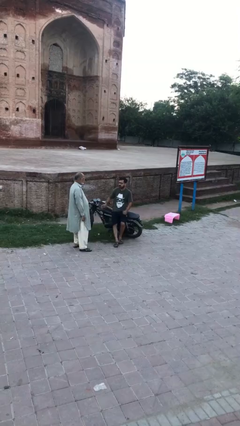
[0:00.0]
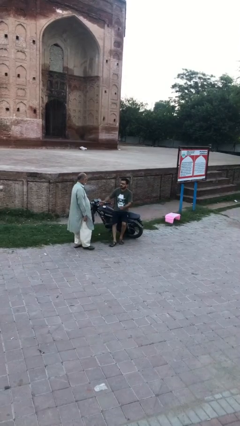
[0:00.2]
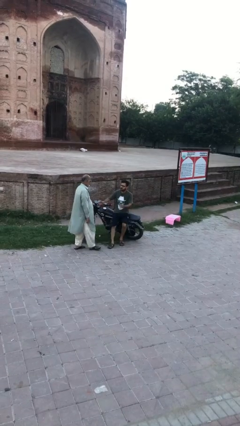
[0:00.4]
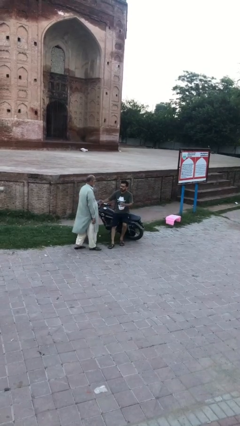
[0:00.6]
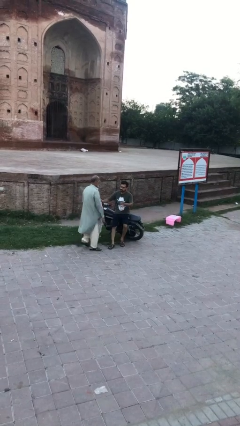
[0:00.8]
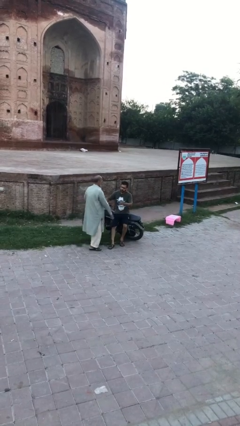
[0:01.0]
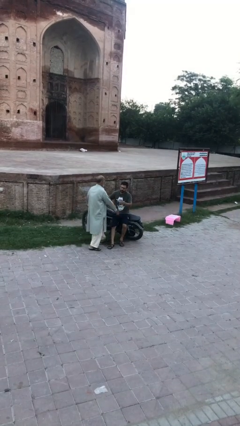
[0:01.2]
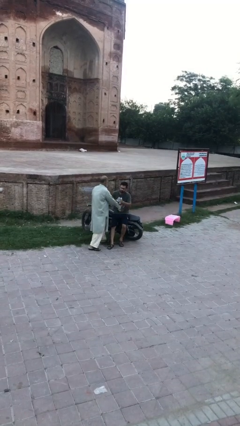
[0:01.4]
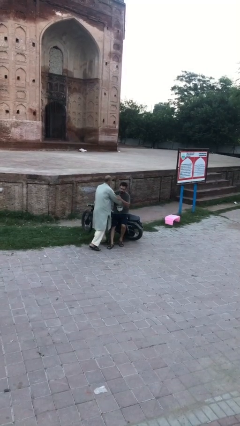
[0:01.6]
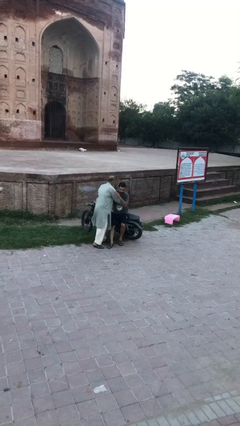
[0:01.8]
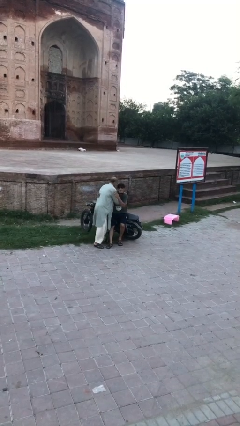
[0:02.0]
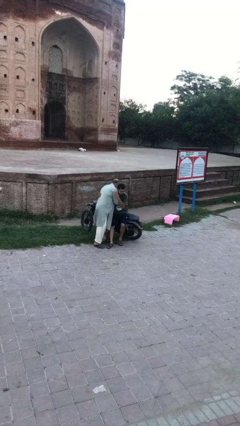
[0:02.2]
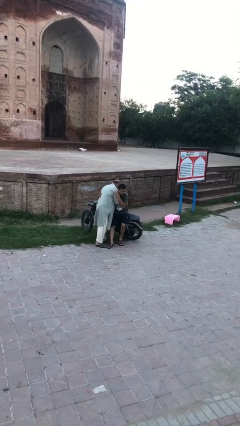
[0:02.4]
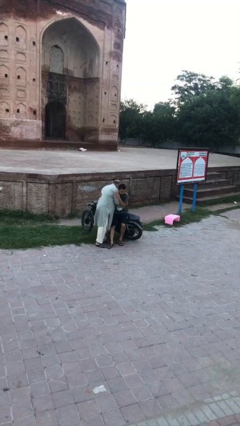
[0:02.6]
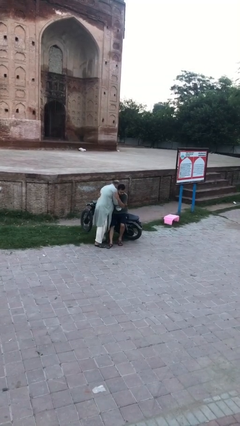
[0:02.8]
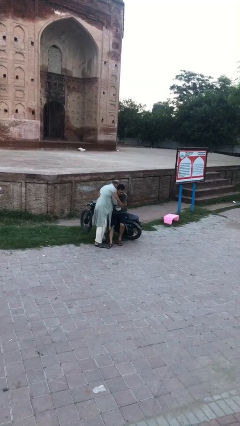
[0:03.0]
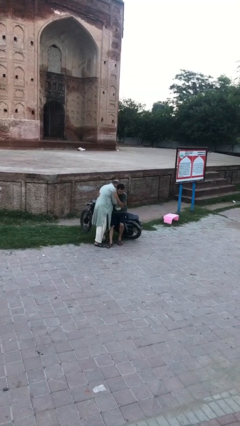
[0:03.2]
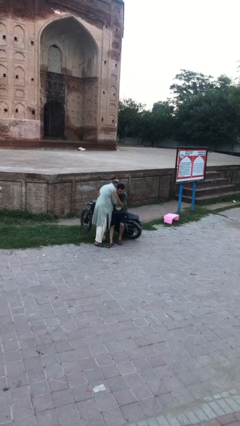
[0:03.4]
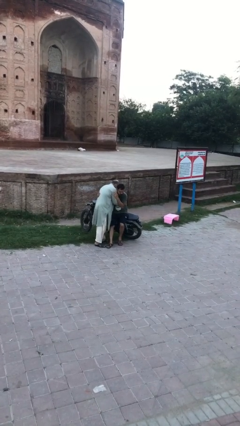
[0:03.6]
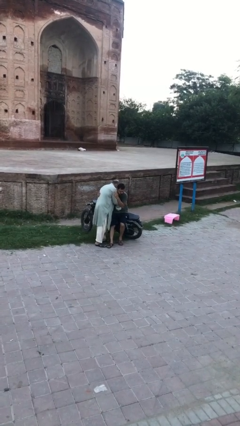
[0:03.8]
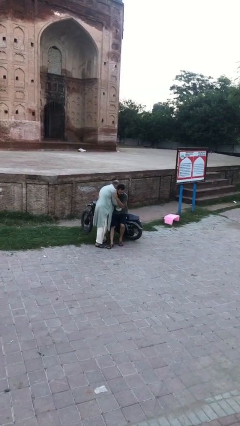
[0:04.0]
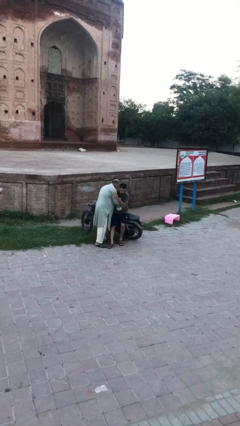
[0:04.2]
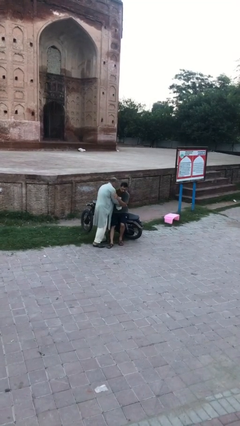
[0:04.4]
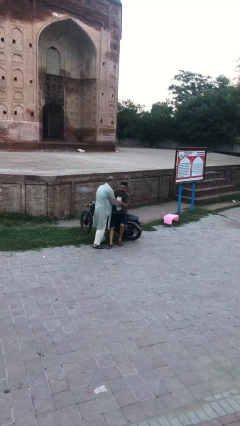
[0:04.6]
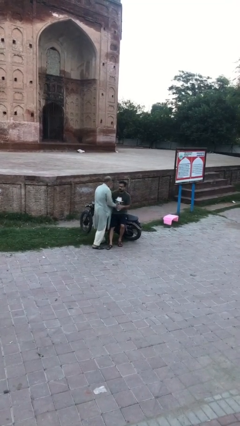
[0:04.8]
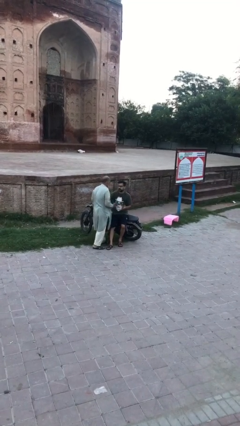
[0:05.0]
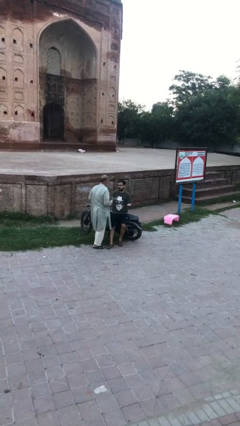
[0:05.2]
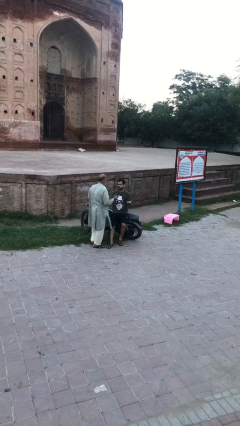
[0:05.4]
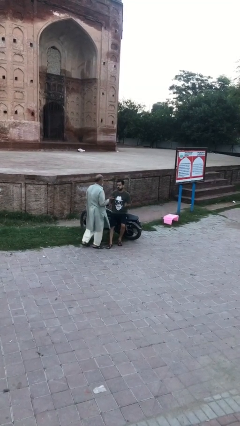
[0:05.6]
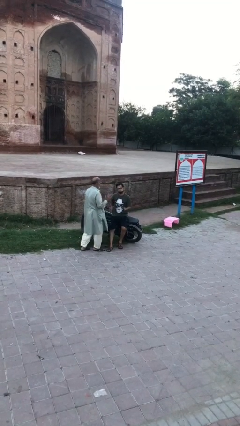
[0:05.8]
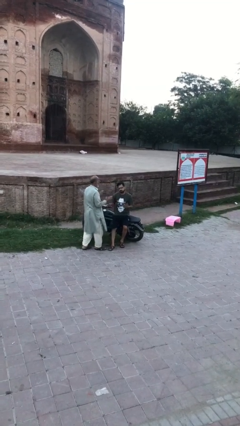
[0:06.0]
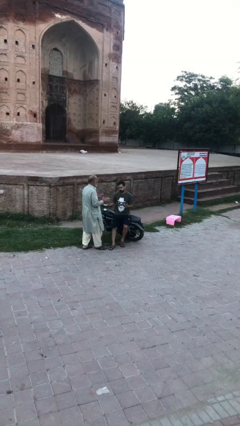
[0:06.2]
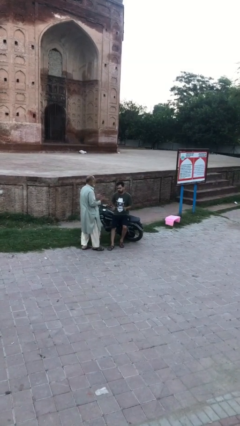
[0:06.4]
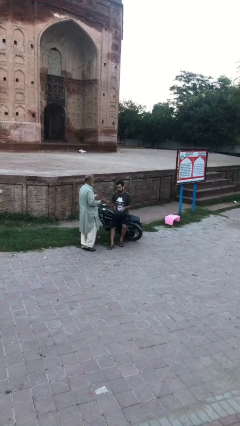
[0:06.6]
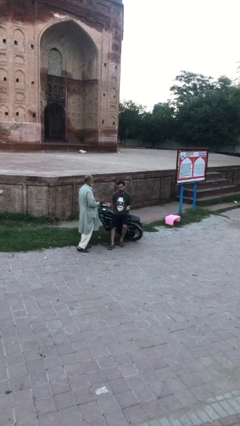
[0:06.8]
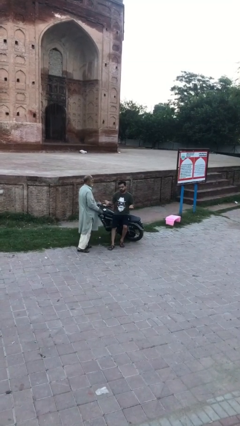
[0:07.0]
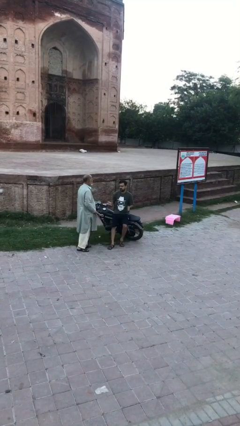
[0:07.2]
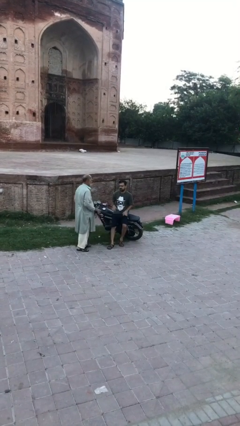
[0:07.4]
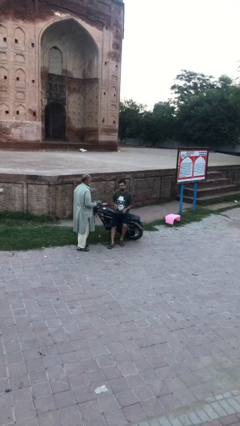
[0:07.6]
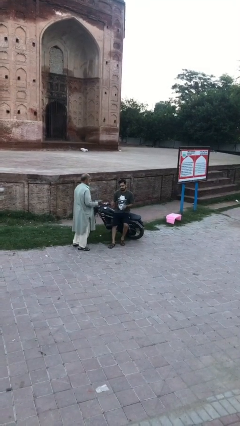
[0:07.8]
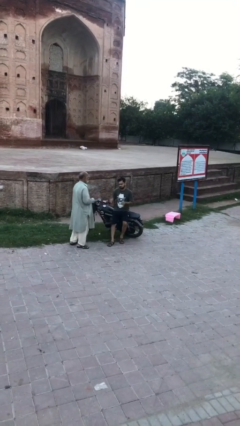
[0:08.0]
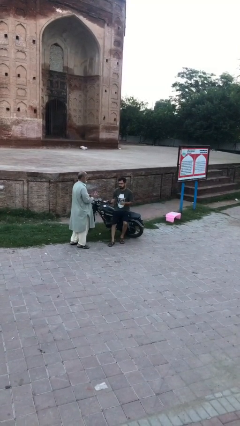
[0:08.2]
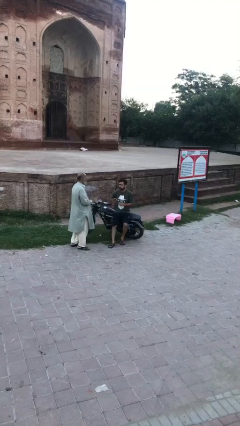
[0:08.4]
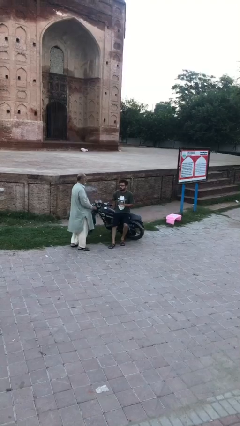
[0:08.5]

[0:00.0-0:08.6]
person embraces person

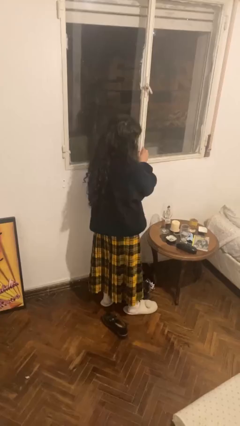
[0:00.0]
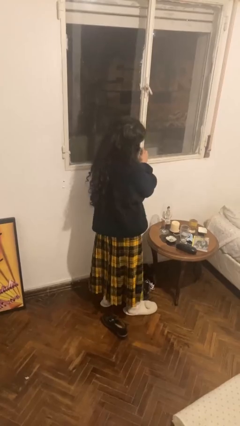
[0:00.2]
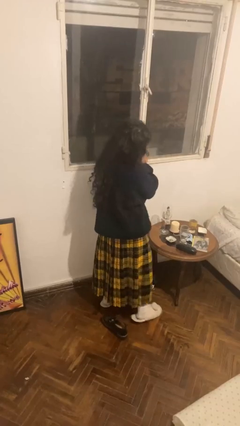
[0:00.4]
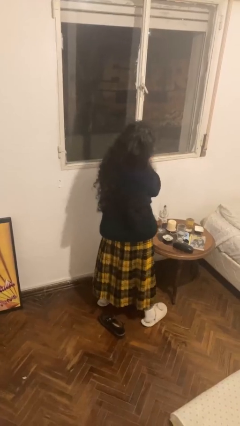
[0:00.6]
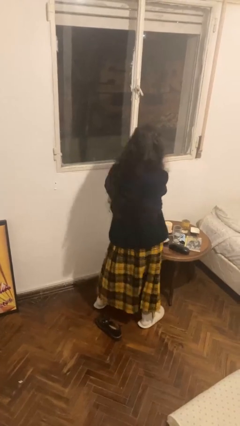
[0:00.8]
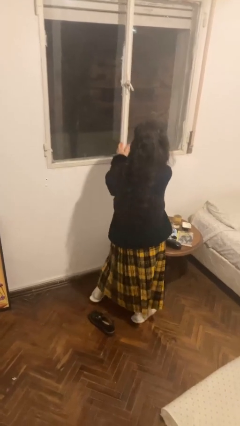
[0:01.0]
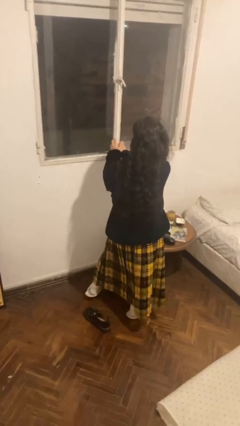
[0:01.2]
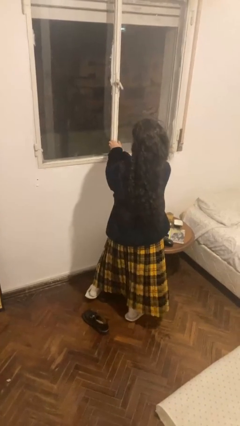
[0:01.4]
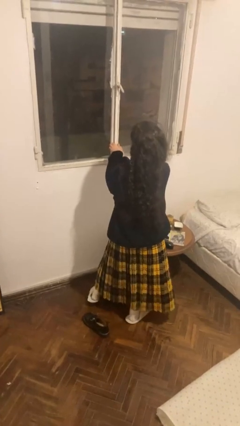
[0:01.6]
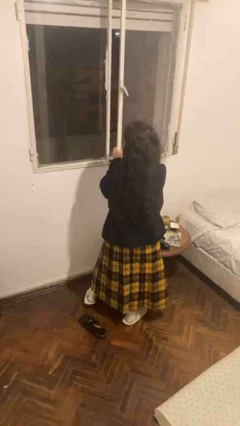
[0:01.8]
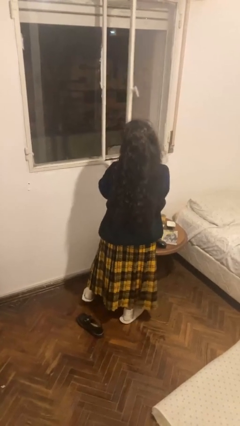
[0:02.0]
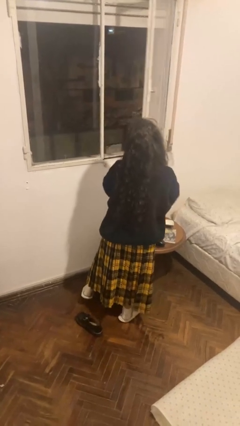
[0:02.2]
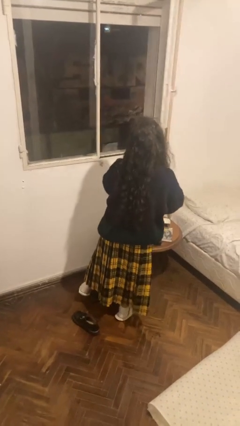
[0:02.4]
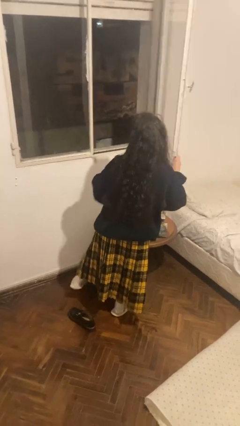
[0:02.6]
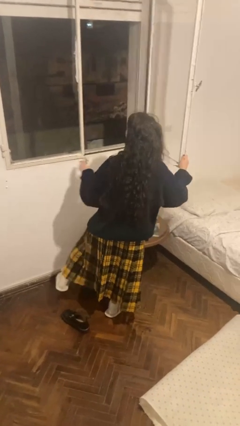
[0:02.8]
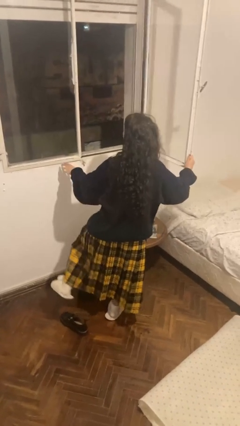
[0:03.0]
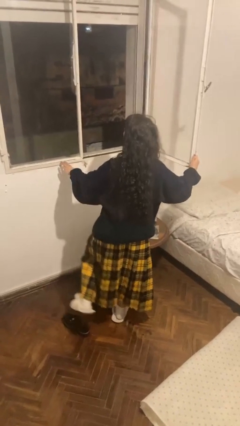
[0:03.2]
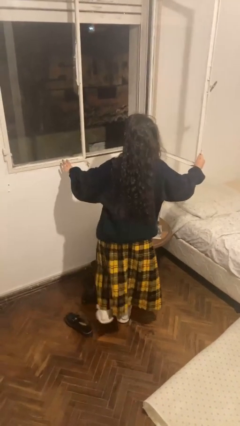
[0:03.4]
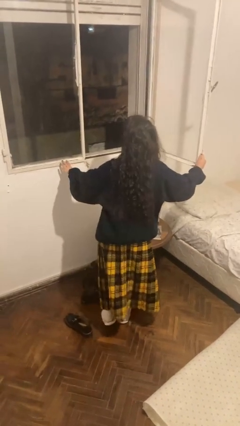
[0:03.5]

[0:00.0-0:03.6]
person opens home window

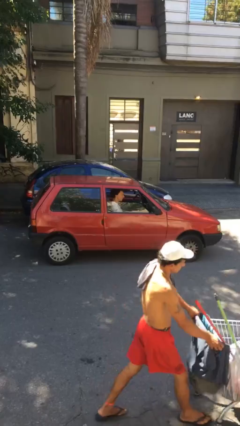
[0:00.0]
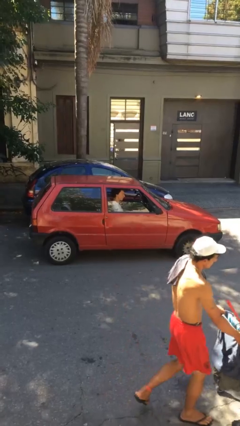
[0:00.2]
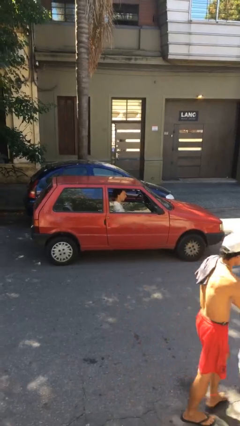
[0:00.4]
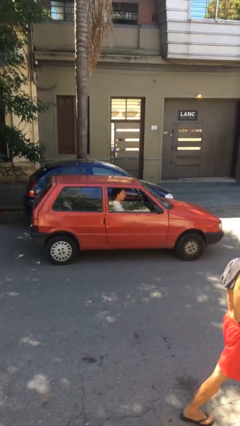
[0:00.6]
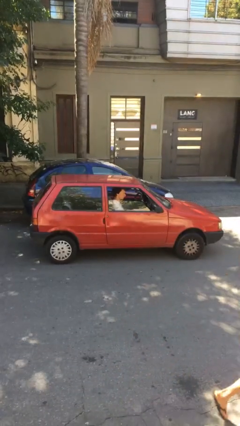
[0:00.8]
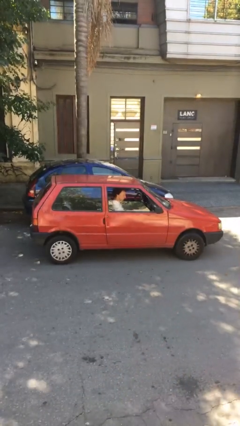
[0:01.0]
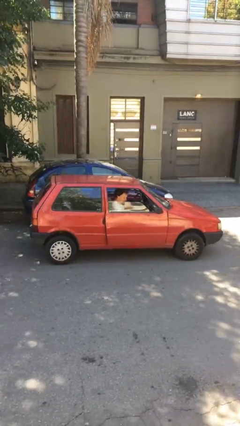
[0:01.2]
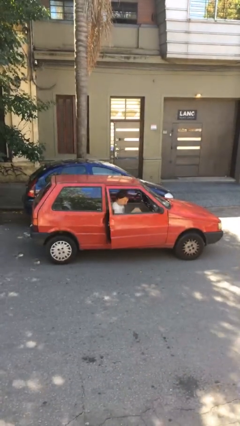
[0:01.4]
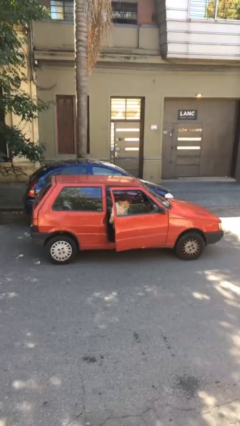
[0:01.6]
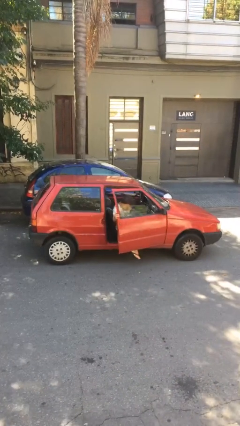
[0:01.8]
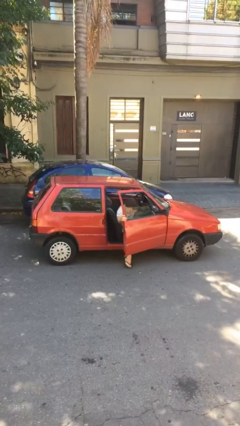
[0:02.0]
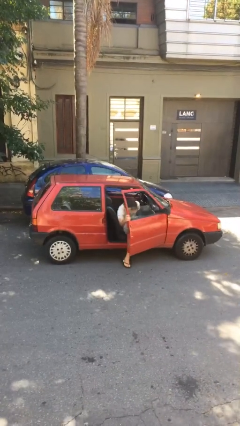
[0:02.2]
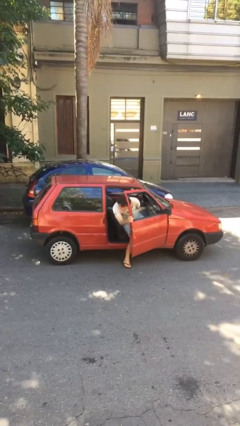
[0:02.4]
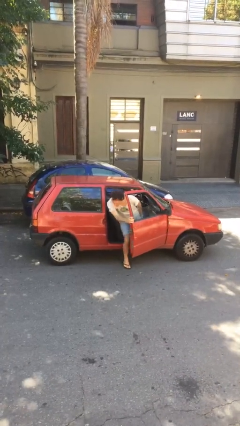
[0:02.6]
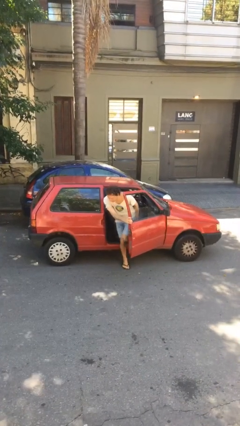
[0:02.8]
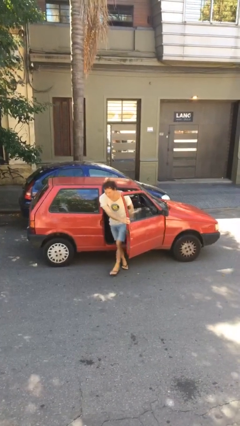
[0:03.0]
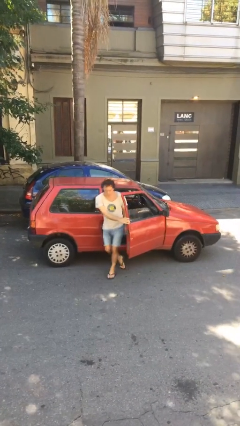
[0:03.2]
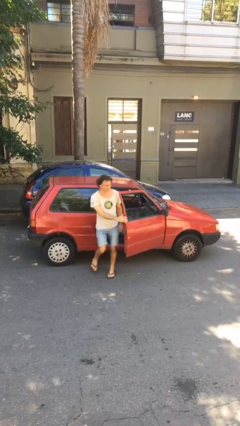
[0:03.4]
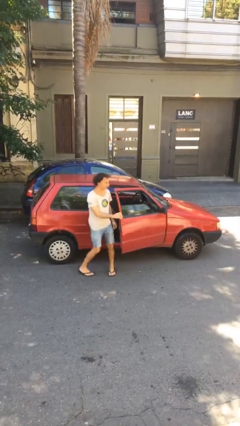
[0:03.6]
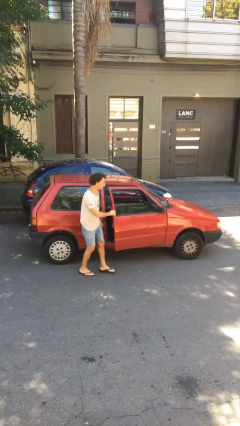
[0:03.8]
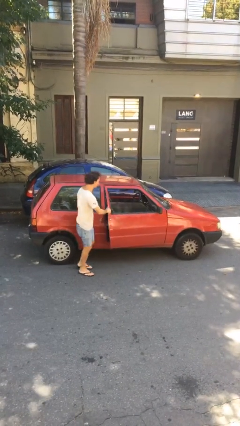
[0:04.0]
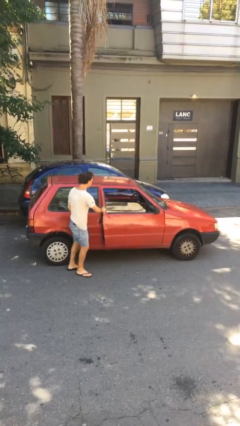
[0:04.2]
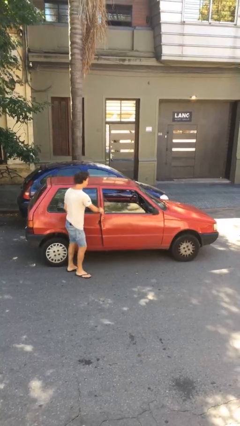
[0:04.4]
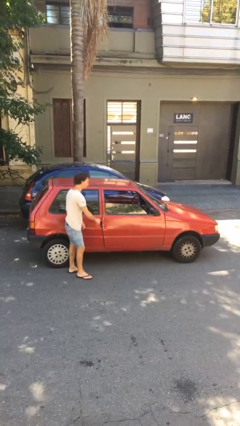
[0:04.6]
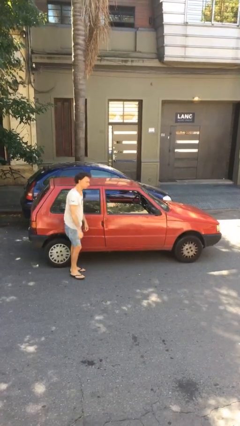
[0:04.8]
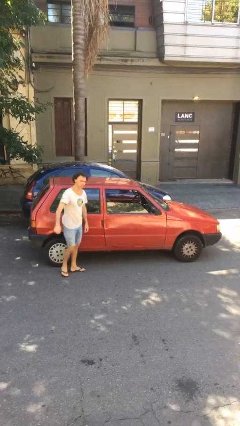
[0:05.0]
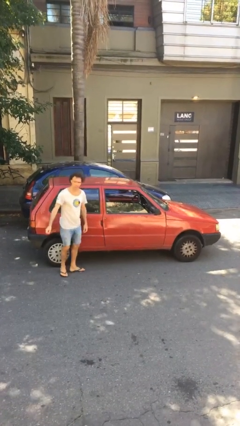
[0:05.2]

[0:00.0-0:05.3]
car drops off person

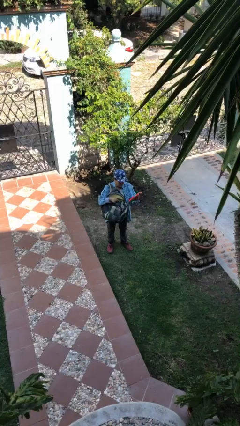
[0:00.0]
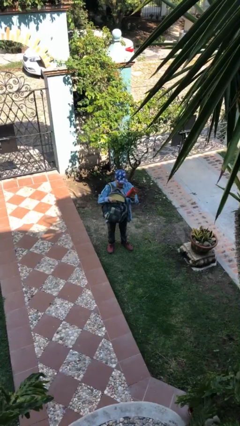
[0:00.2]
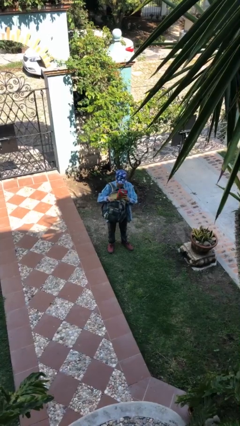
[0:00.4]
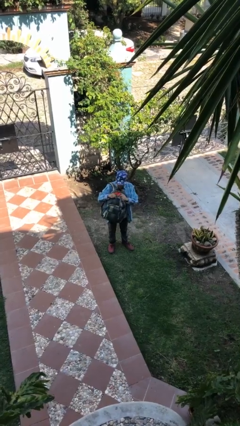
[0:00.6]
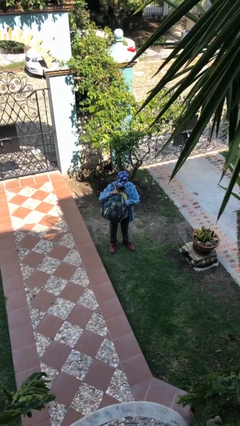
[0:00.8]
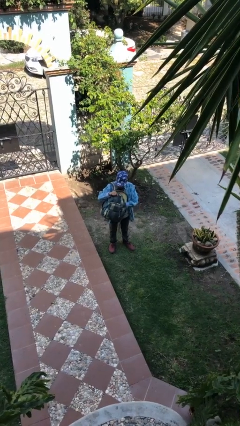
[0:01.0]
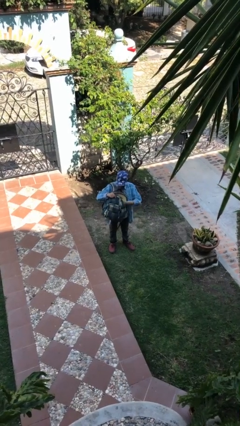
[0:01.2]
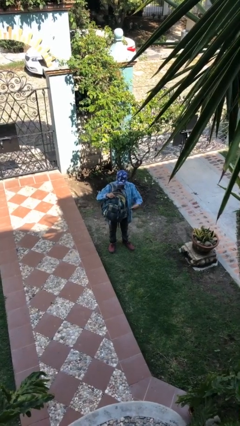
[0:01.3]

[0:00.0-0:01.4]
person puts object into backpack
